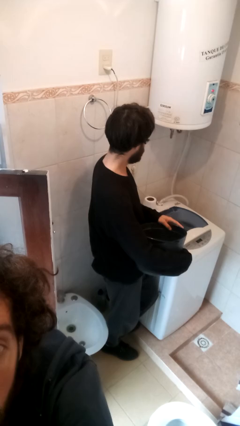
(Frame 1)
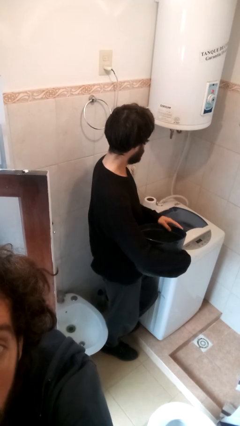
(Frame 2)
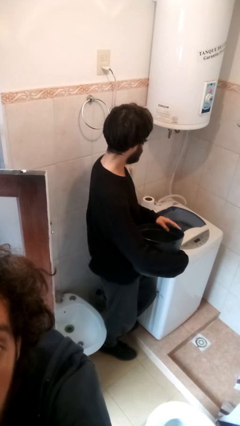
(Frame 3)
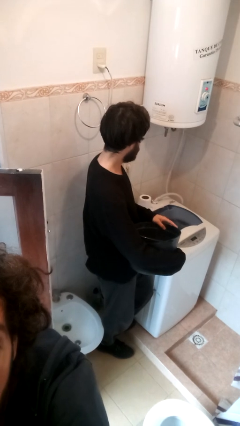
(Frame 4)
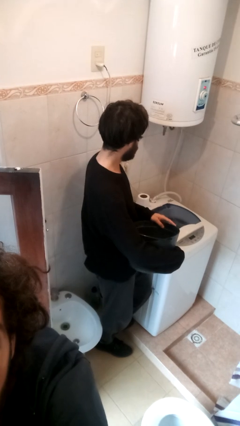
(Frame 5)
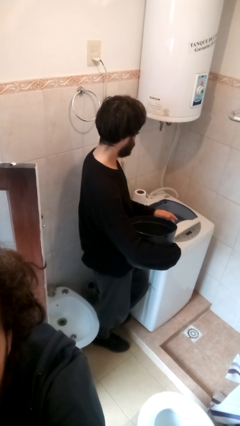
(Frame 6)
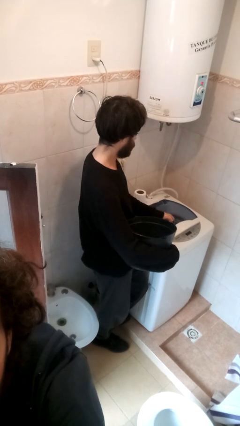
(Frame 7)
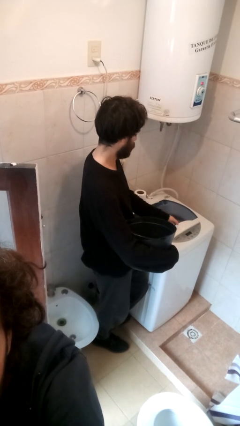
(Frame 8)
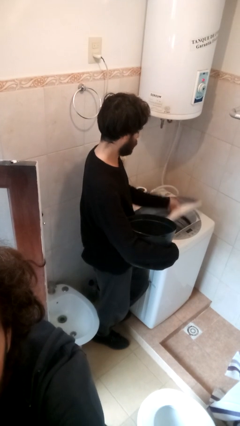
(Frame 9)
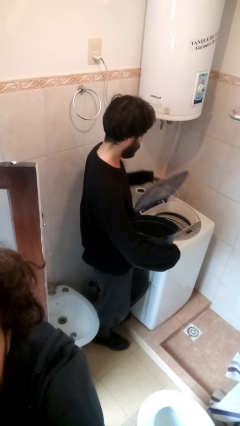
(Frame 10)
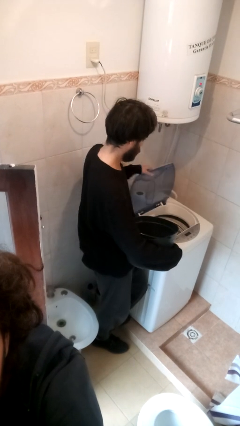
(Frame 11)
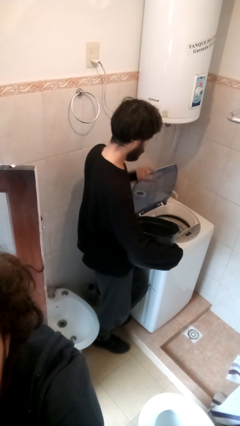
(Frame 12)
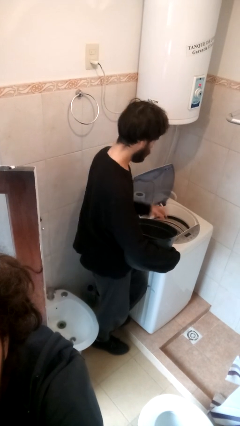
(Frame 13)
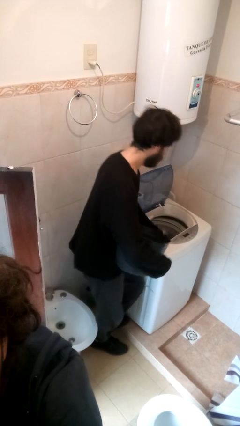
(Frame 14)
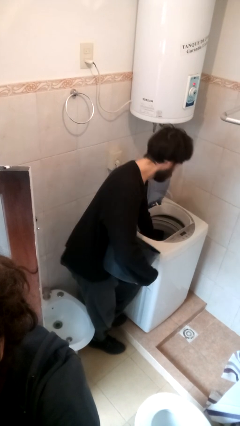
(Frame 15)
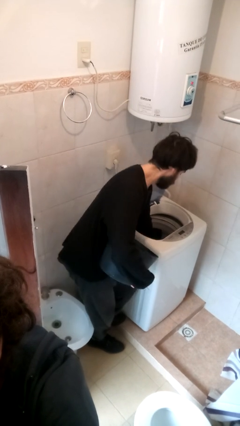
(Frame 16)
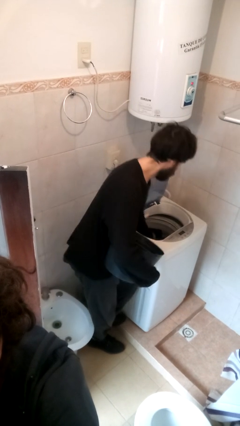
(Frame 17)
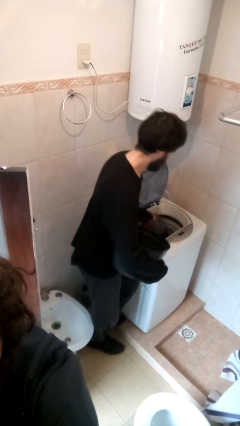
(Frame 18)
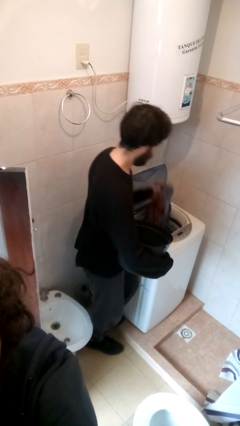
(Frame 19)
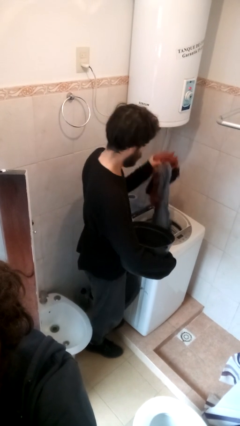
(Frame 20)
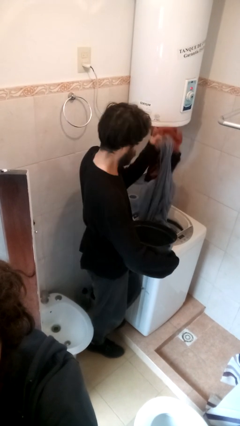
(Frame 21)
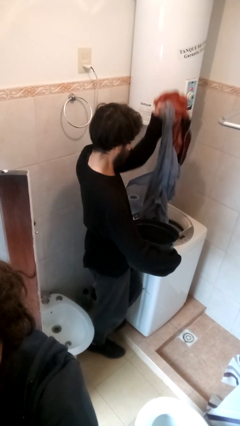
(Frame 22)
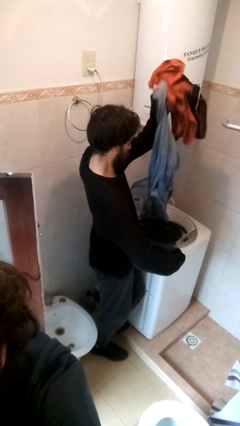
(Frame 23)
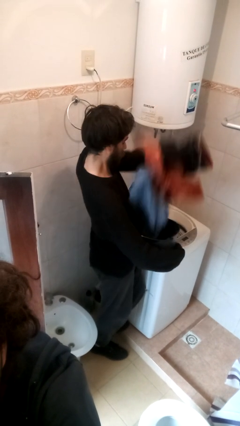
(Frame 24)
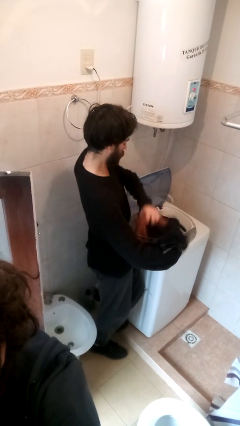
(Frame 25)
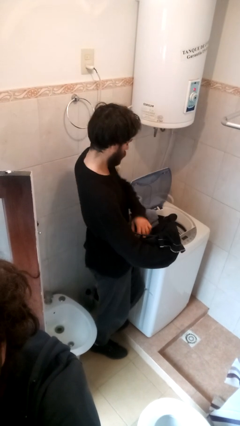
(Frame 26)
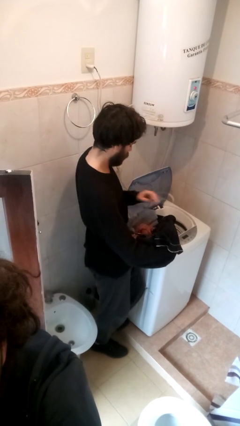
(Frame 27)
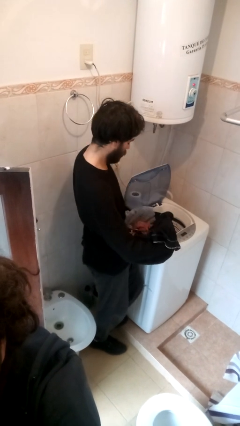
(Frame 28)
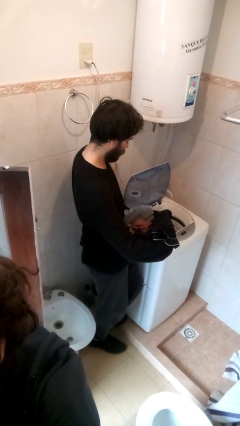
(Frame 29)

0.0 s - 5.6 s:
person loads clotheswasher

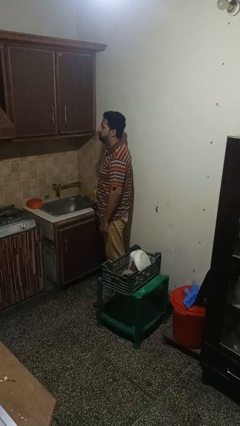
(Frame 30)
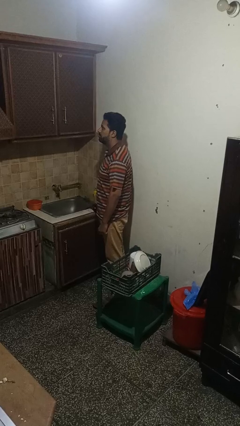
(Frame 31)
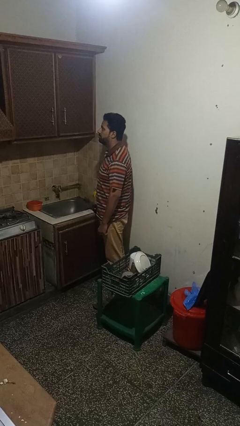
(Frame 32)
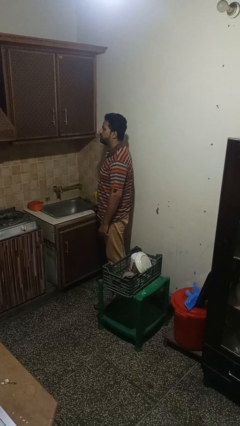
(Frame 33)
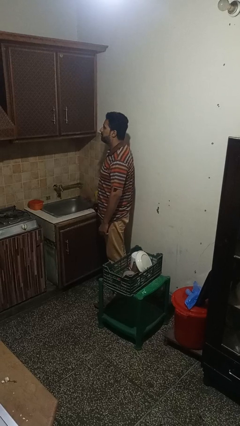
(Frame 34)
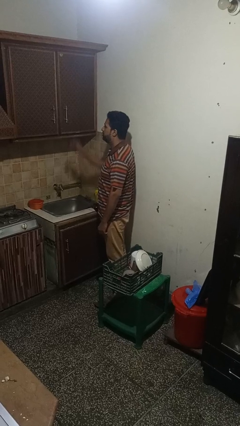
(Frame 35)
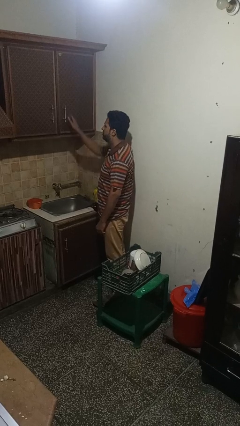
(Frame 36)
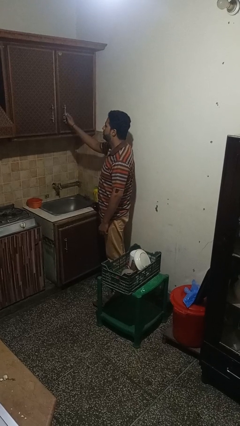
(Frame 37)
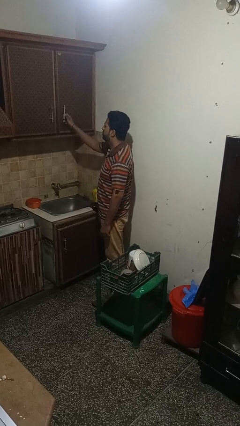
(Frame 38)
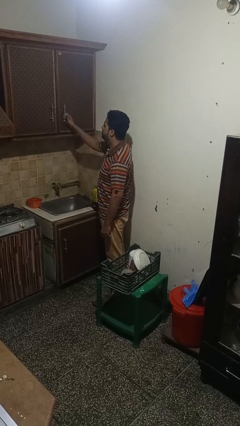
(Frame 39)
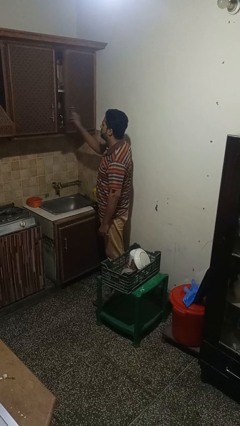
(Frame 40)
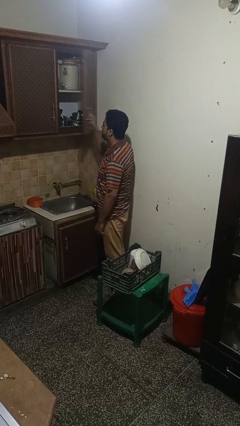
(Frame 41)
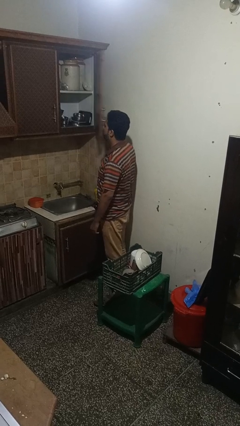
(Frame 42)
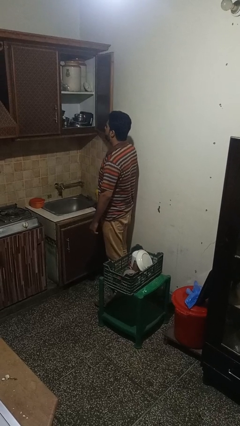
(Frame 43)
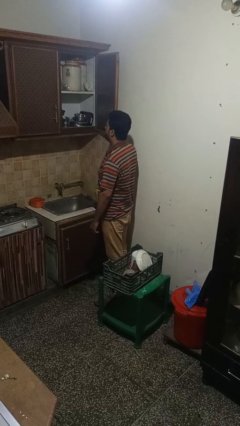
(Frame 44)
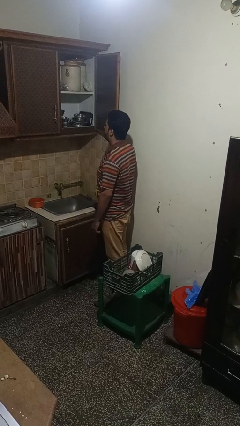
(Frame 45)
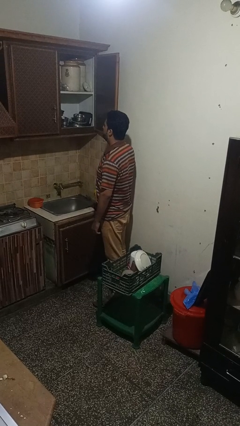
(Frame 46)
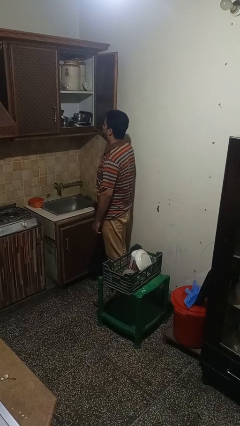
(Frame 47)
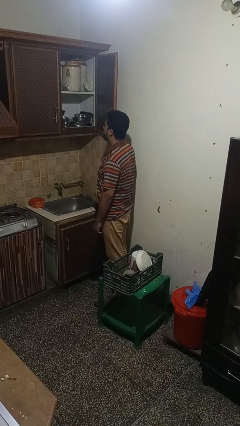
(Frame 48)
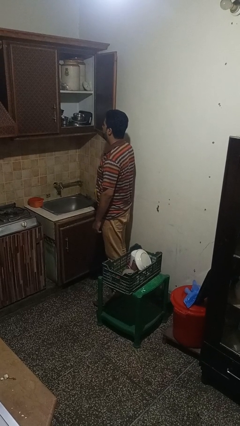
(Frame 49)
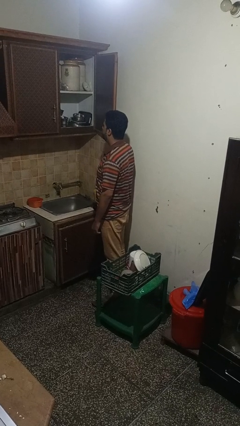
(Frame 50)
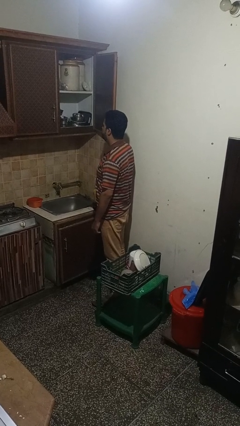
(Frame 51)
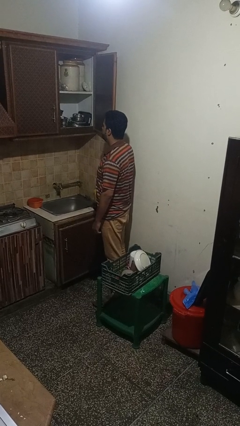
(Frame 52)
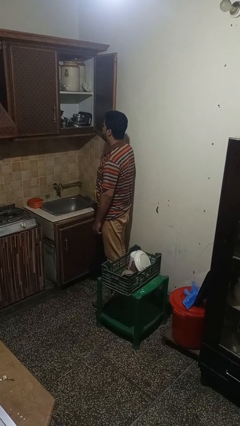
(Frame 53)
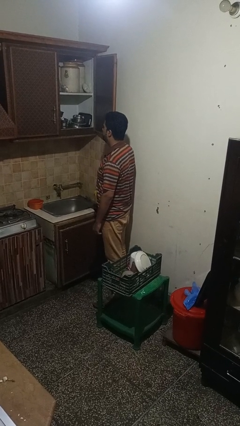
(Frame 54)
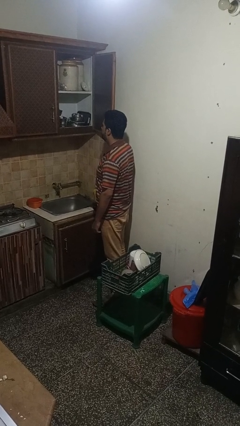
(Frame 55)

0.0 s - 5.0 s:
person opens cabinet

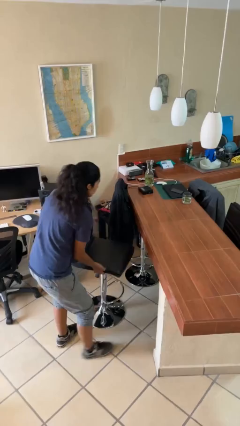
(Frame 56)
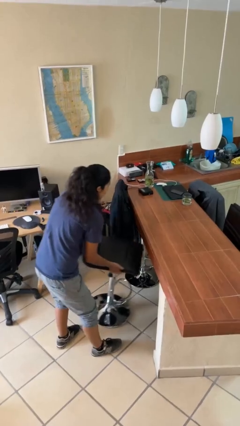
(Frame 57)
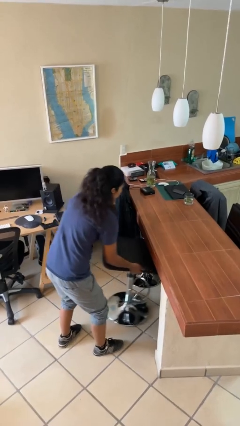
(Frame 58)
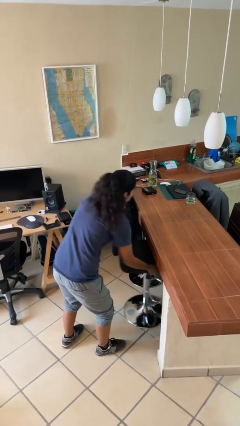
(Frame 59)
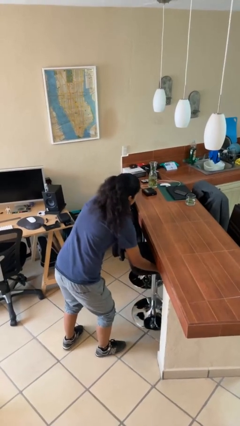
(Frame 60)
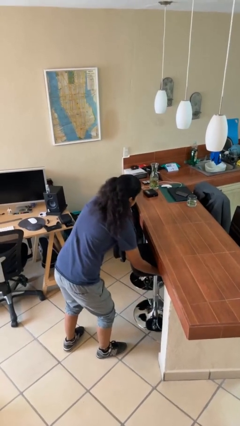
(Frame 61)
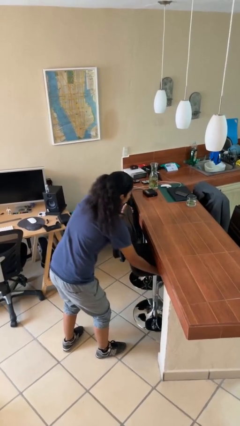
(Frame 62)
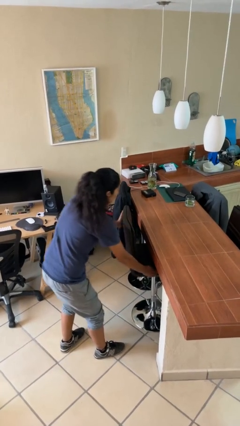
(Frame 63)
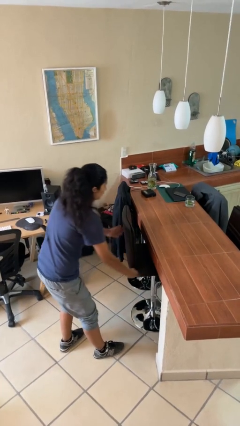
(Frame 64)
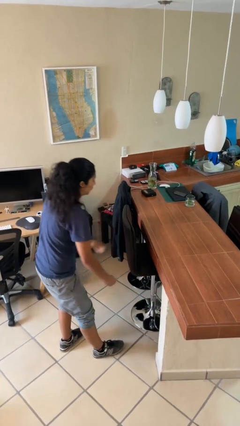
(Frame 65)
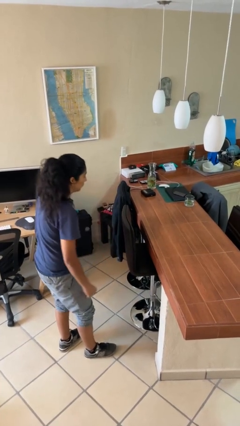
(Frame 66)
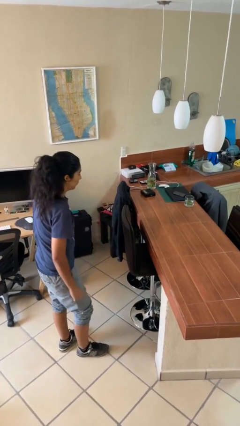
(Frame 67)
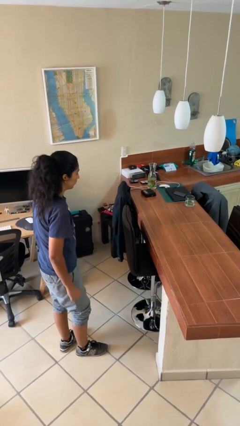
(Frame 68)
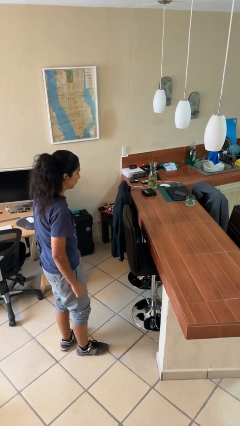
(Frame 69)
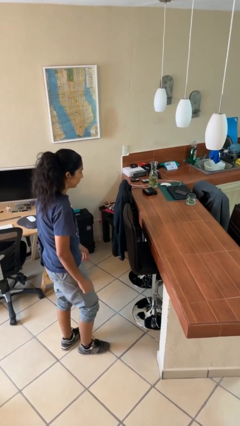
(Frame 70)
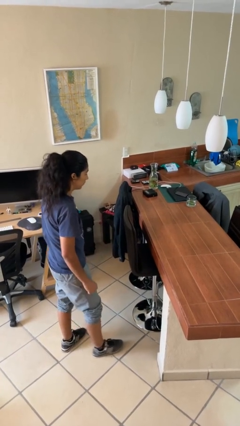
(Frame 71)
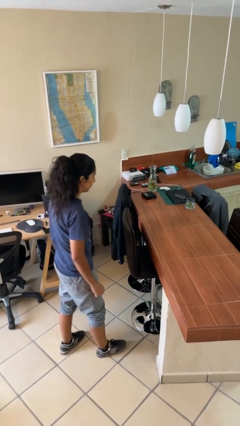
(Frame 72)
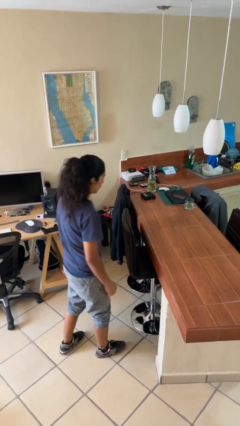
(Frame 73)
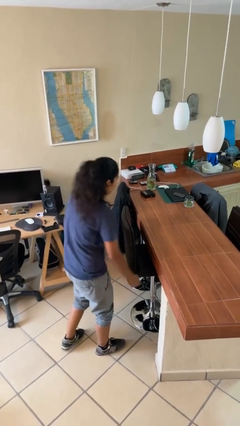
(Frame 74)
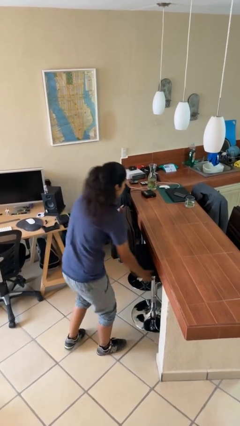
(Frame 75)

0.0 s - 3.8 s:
person pushes in chair

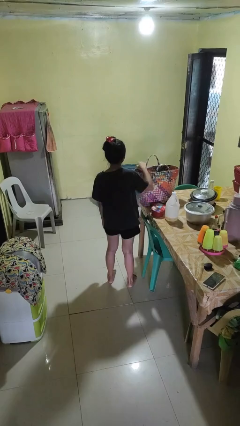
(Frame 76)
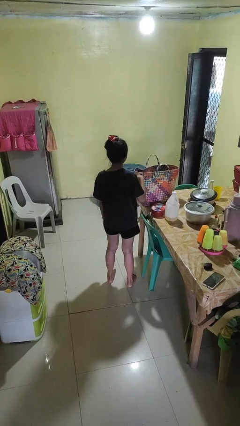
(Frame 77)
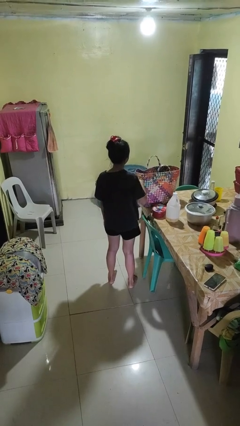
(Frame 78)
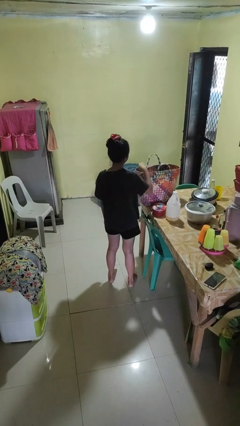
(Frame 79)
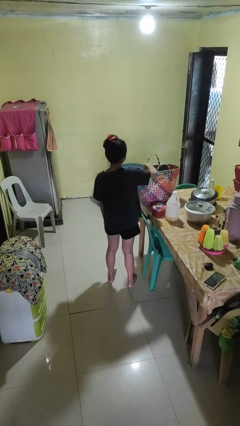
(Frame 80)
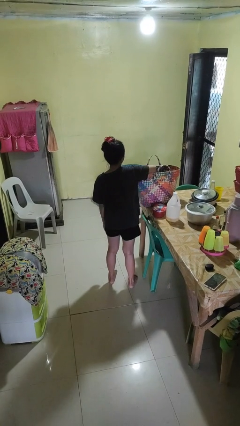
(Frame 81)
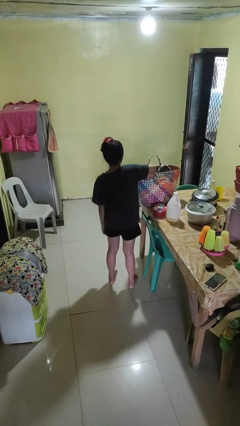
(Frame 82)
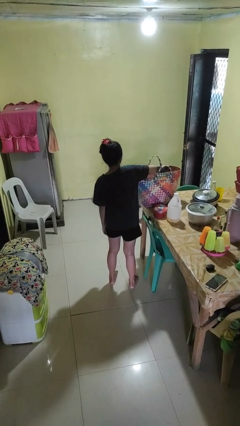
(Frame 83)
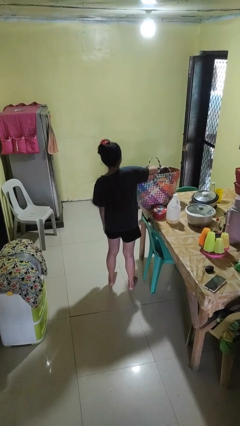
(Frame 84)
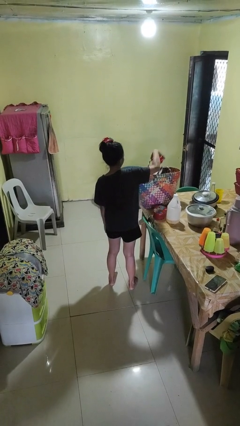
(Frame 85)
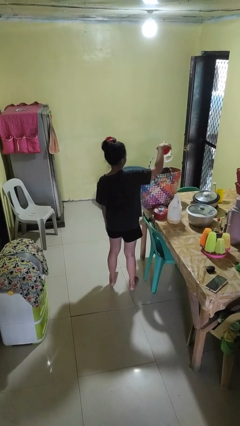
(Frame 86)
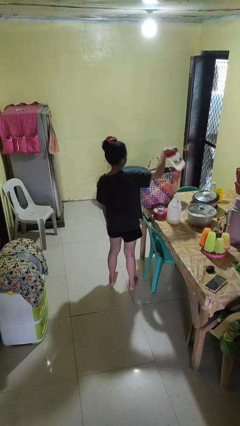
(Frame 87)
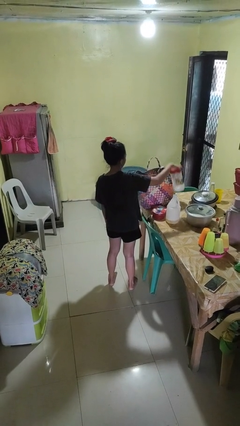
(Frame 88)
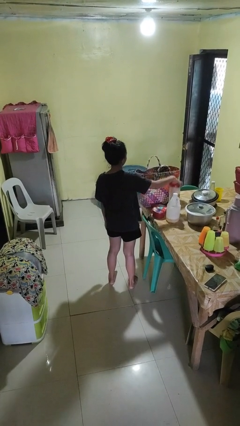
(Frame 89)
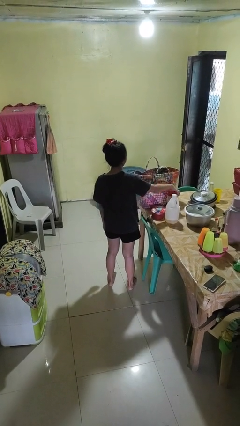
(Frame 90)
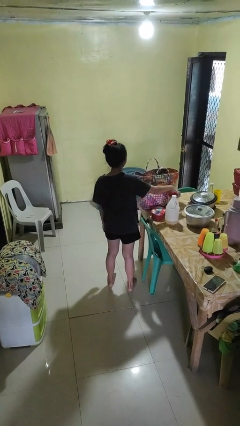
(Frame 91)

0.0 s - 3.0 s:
person takes object from basket

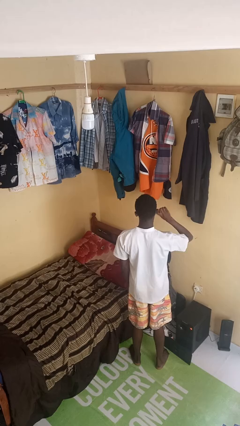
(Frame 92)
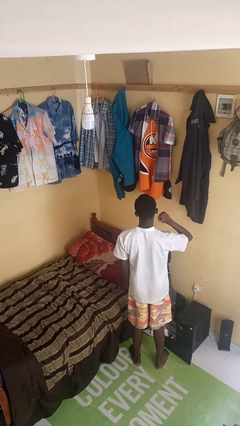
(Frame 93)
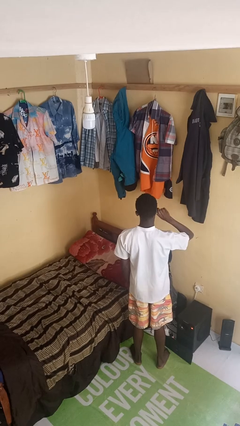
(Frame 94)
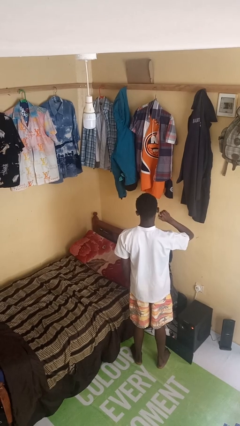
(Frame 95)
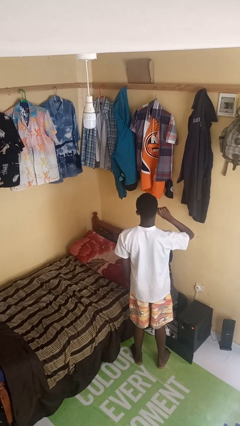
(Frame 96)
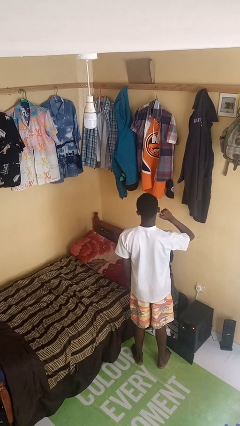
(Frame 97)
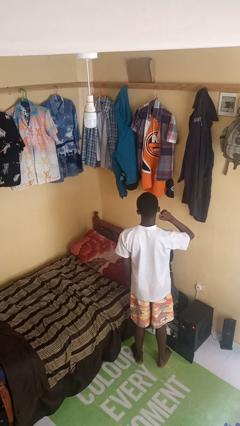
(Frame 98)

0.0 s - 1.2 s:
person gestures listen closely
